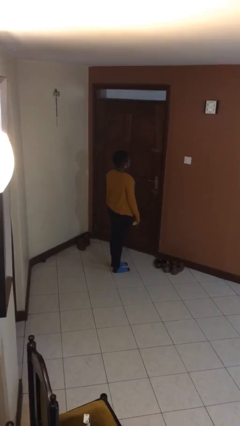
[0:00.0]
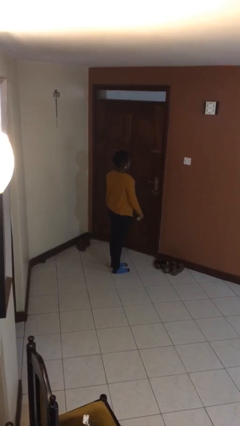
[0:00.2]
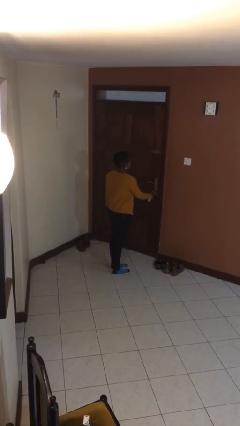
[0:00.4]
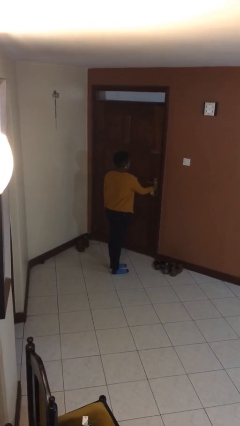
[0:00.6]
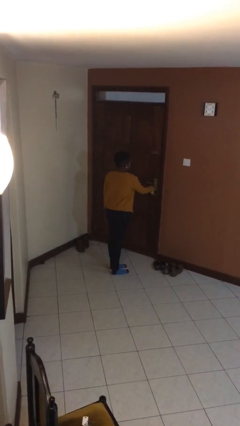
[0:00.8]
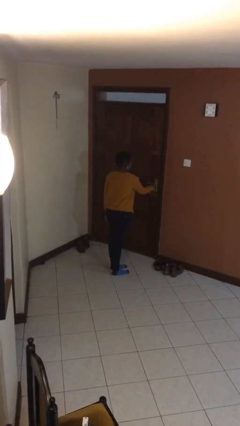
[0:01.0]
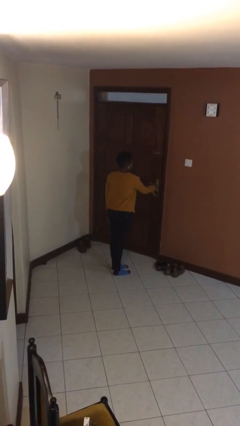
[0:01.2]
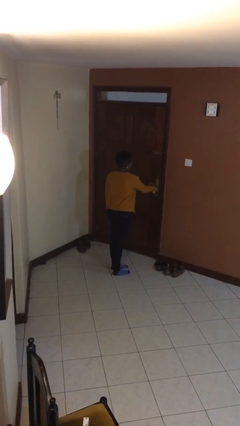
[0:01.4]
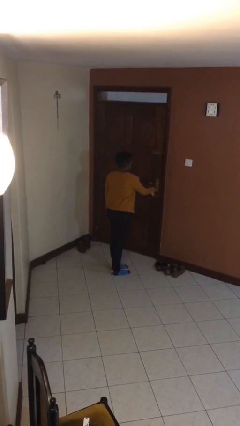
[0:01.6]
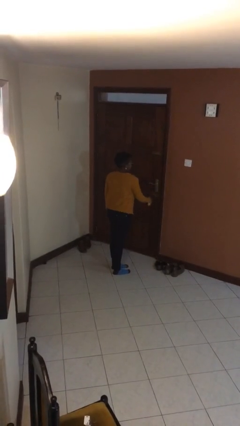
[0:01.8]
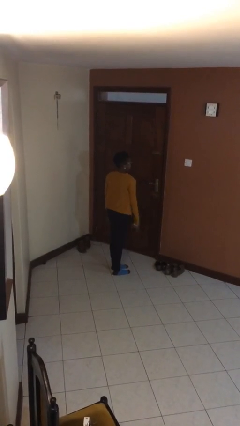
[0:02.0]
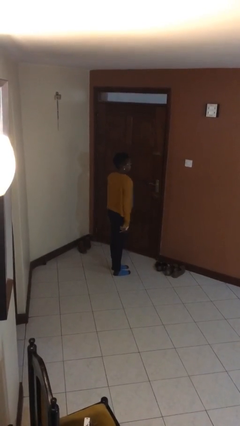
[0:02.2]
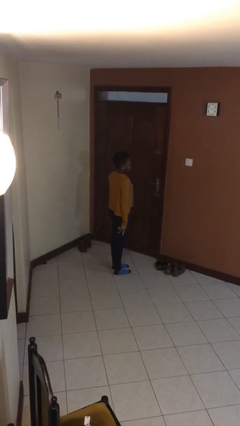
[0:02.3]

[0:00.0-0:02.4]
person locks door with keys

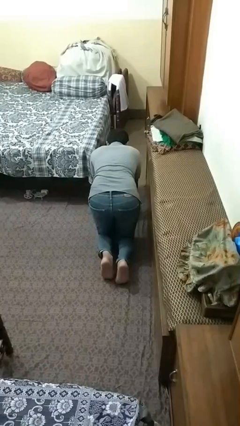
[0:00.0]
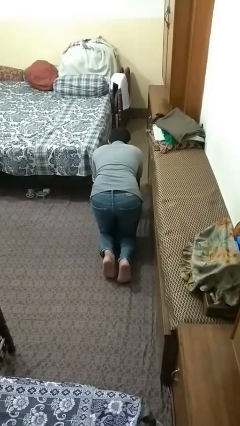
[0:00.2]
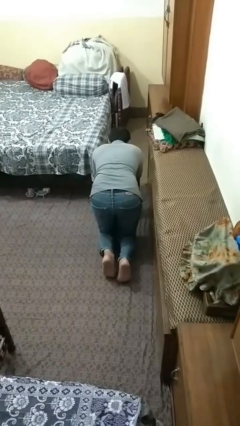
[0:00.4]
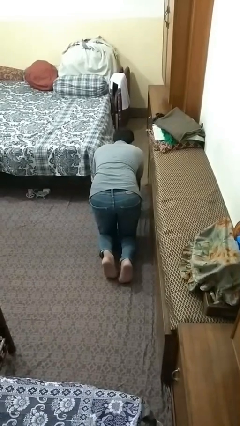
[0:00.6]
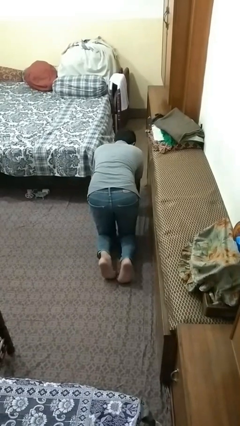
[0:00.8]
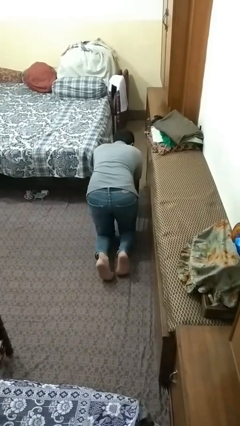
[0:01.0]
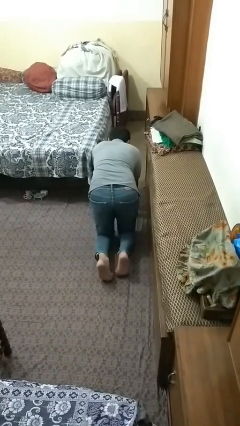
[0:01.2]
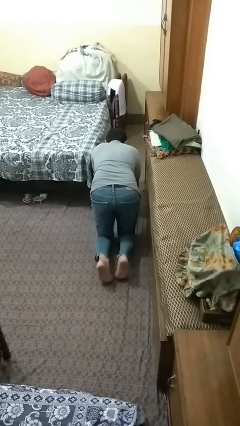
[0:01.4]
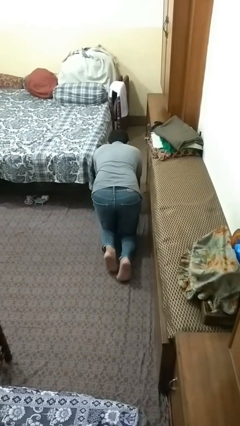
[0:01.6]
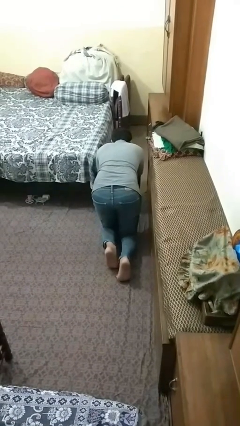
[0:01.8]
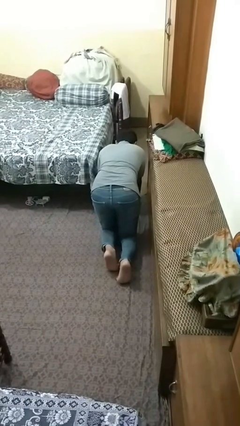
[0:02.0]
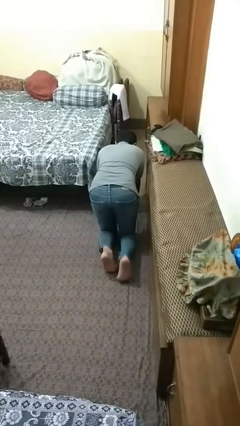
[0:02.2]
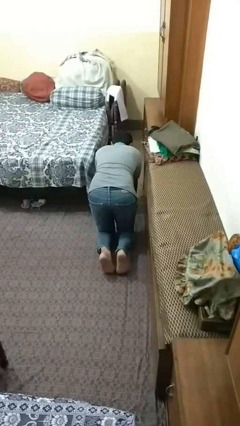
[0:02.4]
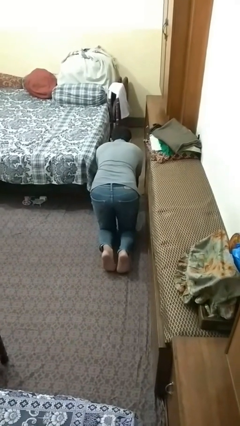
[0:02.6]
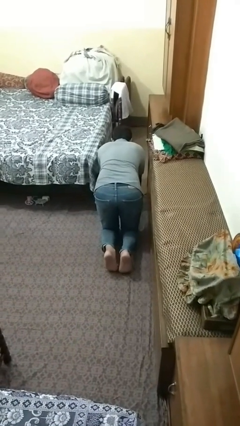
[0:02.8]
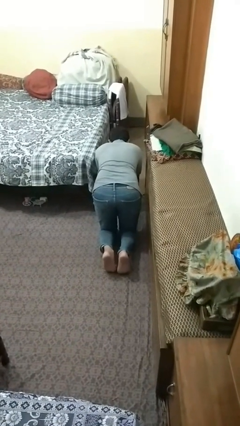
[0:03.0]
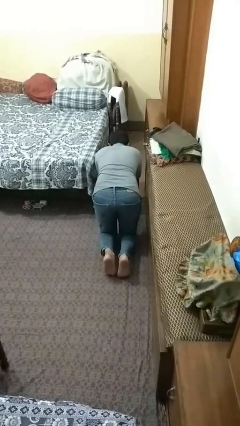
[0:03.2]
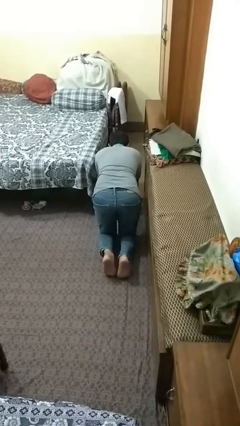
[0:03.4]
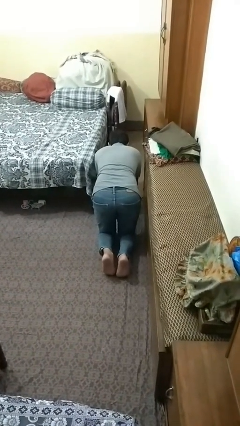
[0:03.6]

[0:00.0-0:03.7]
person crawls

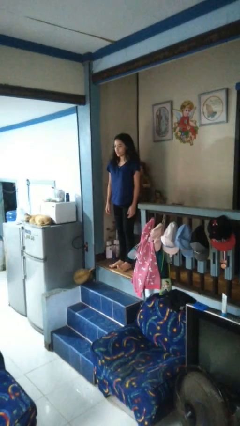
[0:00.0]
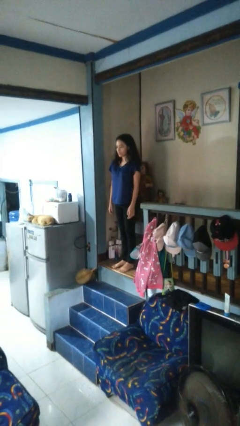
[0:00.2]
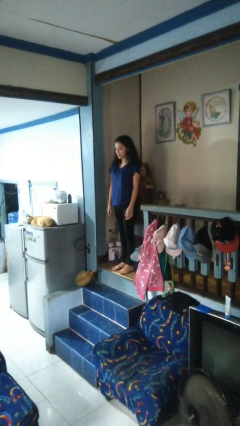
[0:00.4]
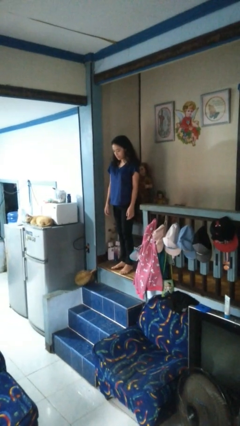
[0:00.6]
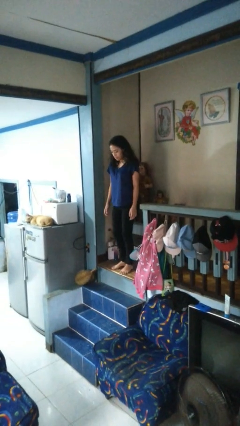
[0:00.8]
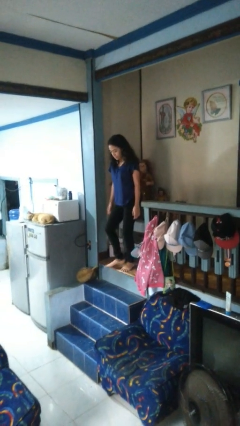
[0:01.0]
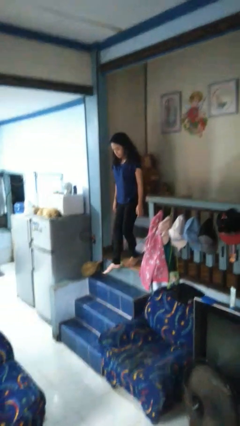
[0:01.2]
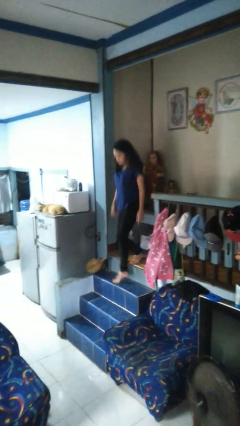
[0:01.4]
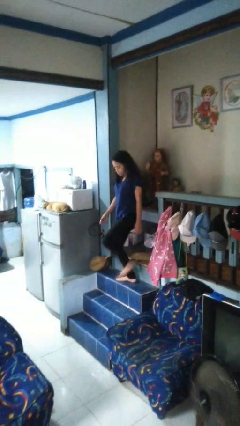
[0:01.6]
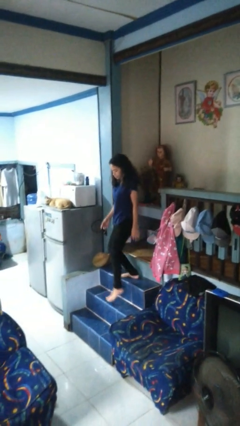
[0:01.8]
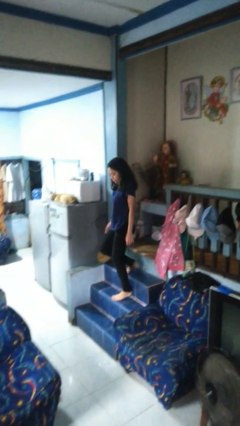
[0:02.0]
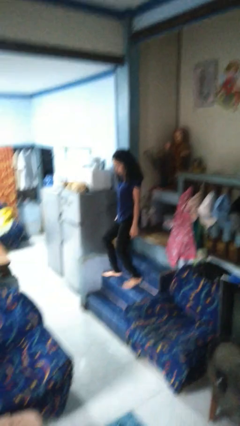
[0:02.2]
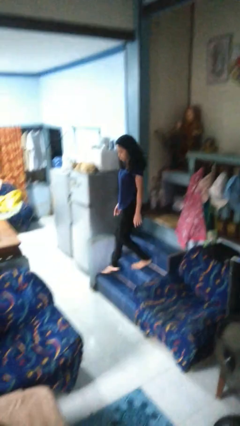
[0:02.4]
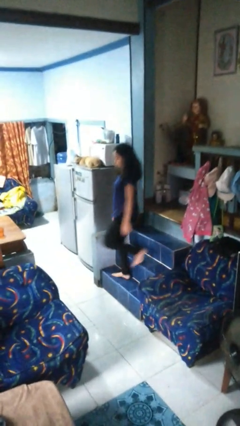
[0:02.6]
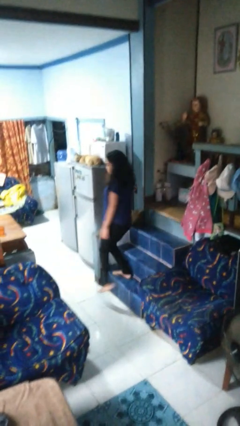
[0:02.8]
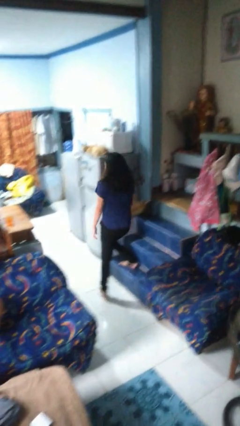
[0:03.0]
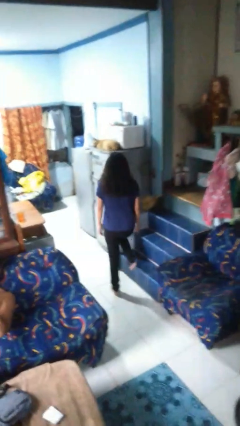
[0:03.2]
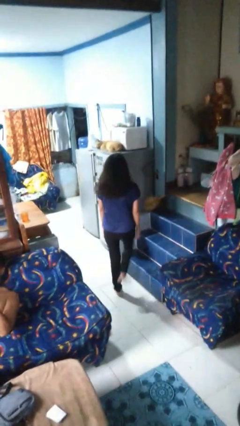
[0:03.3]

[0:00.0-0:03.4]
person climbs down stairs

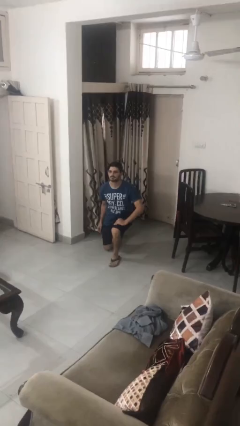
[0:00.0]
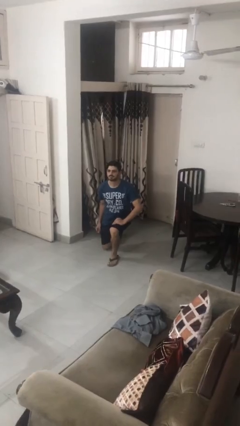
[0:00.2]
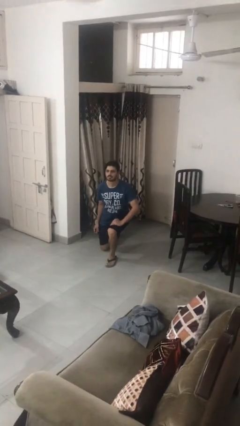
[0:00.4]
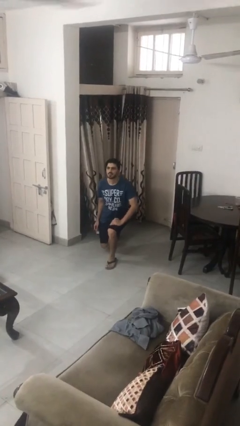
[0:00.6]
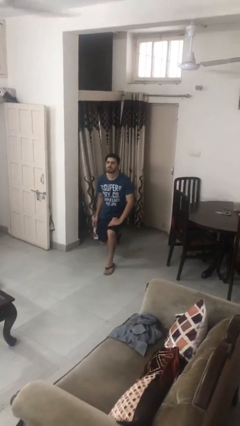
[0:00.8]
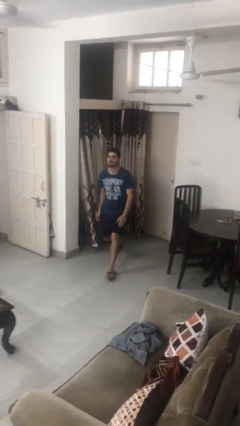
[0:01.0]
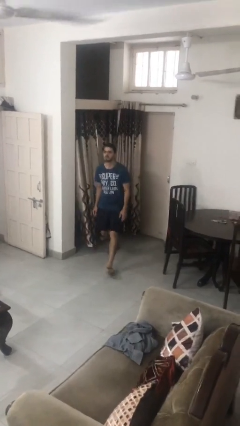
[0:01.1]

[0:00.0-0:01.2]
person stands up from floor

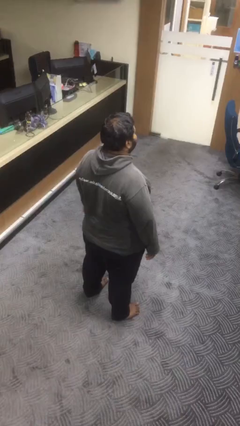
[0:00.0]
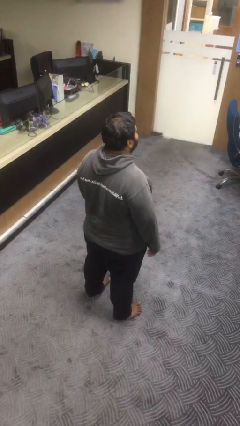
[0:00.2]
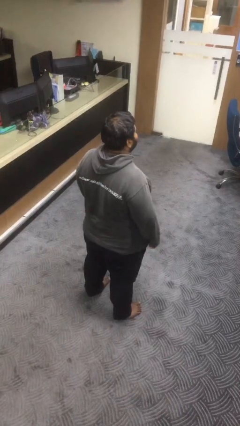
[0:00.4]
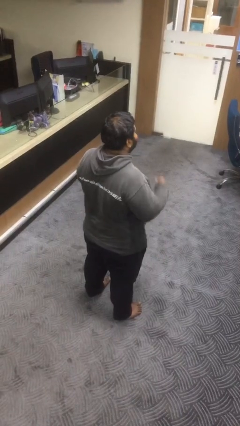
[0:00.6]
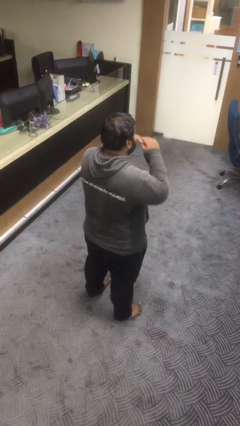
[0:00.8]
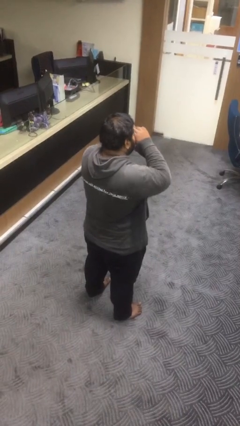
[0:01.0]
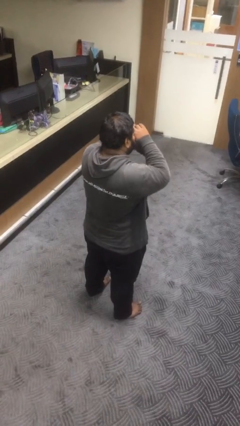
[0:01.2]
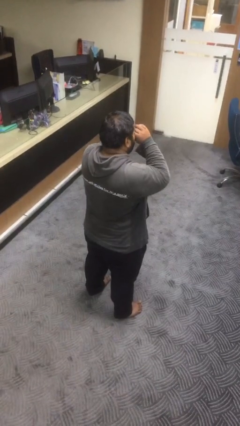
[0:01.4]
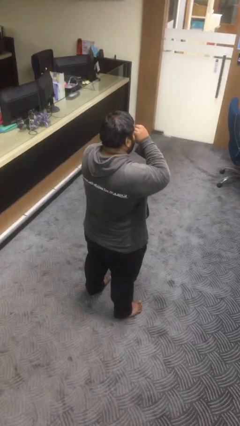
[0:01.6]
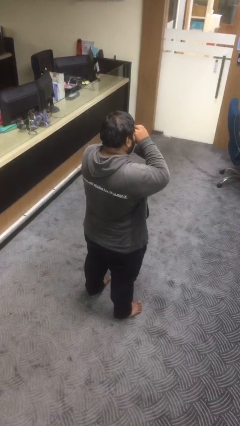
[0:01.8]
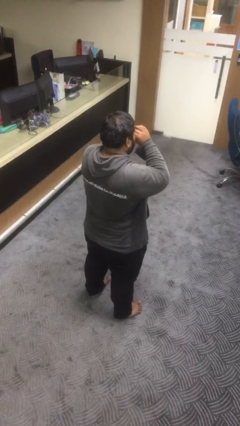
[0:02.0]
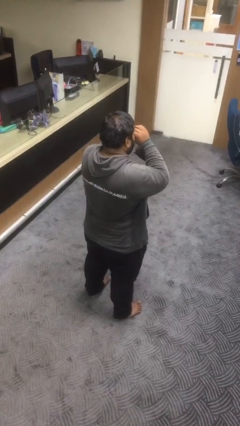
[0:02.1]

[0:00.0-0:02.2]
person rubs eyes

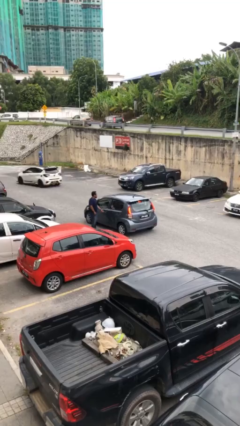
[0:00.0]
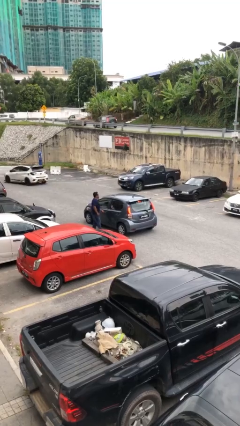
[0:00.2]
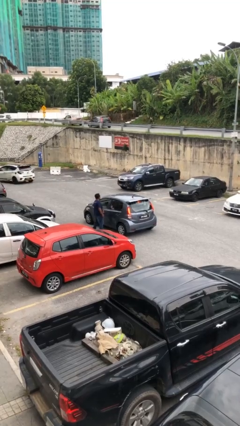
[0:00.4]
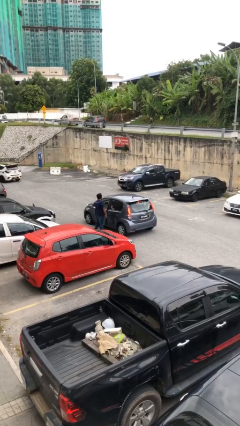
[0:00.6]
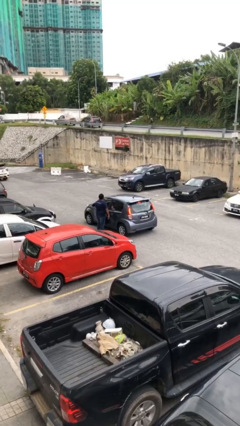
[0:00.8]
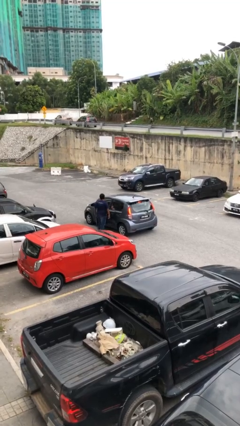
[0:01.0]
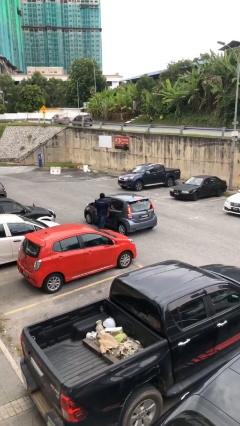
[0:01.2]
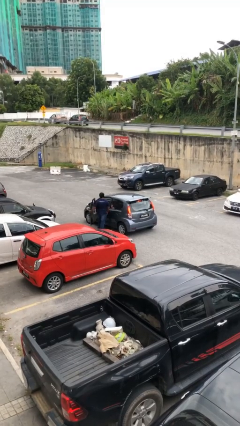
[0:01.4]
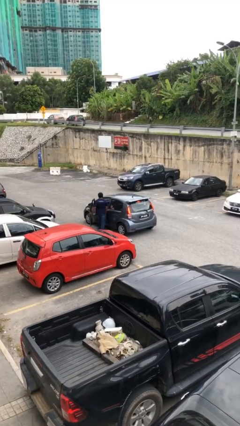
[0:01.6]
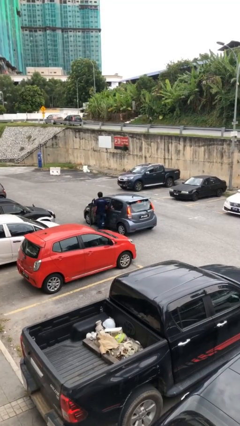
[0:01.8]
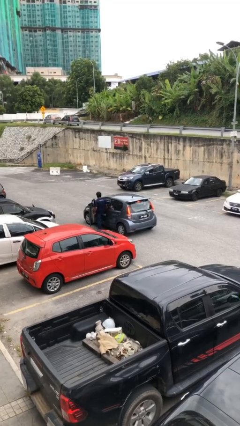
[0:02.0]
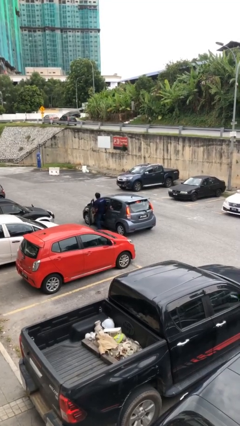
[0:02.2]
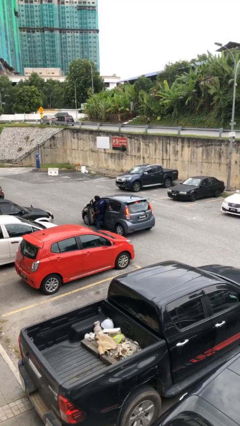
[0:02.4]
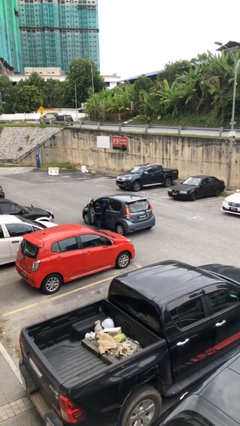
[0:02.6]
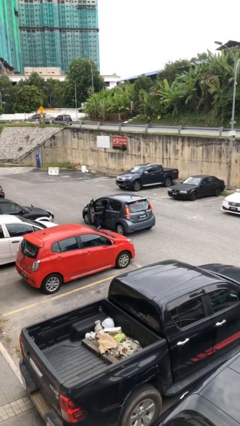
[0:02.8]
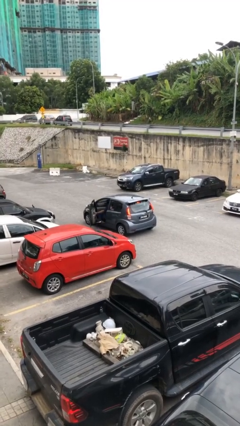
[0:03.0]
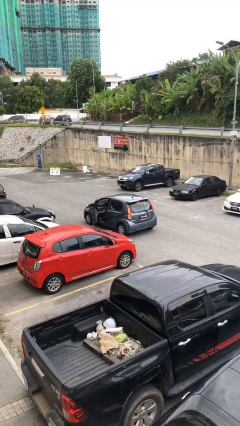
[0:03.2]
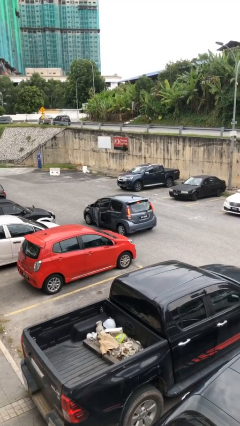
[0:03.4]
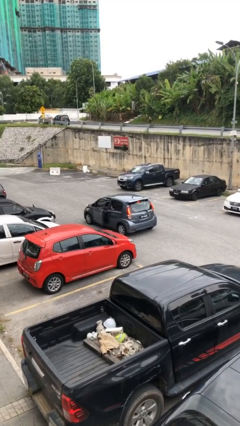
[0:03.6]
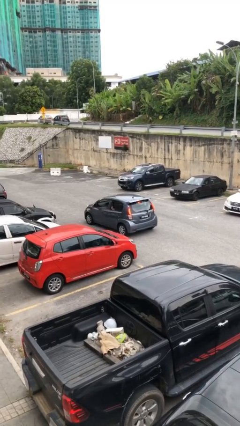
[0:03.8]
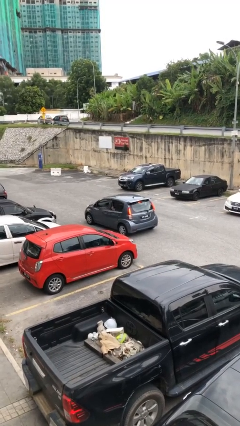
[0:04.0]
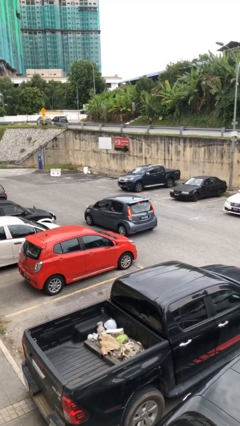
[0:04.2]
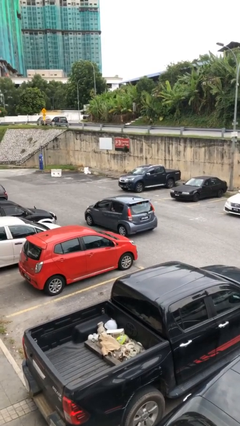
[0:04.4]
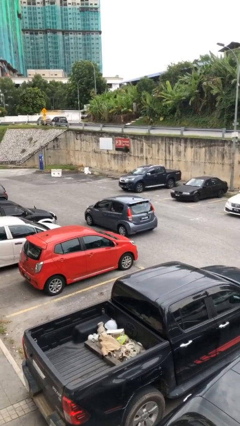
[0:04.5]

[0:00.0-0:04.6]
car picks up person
